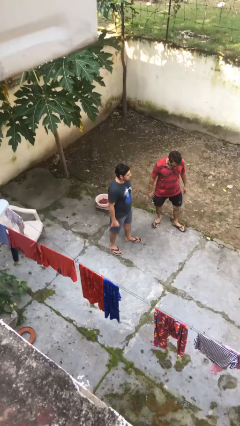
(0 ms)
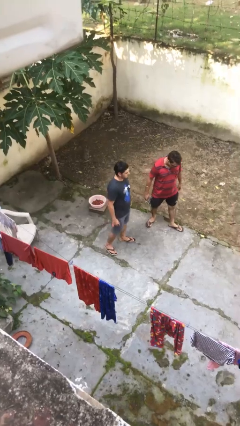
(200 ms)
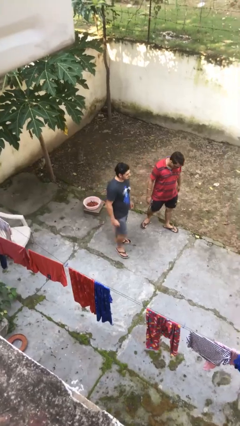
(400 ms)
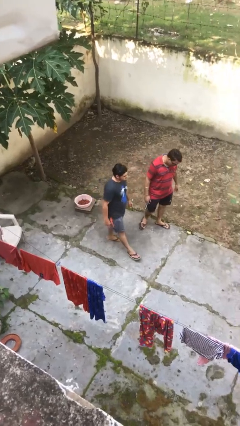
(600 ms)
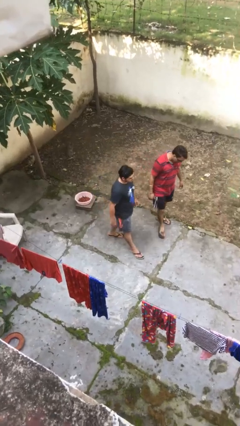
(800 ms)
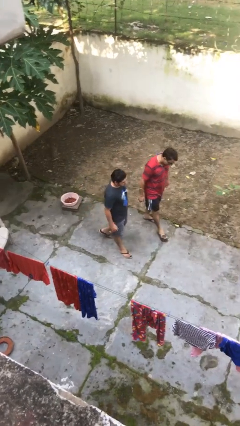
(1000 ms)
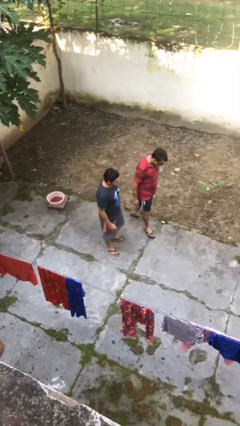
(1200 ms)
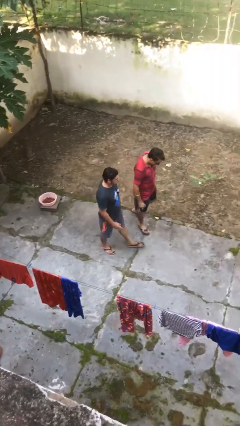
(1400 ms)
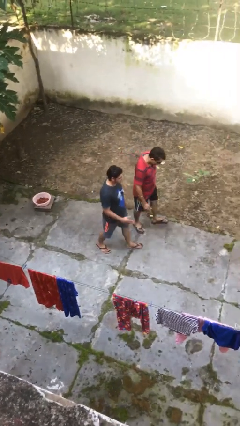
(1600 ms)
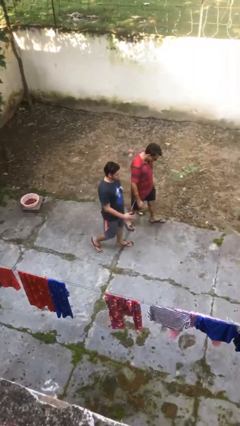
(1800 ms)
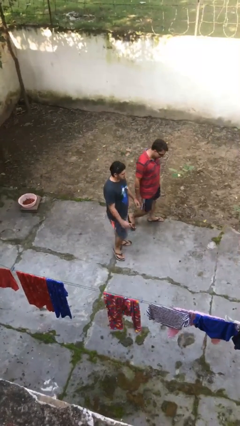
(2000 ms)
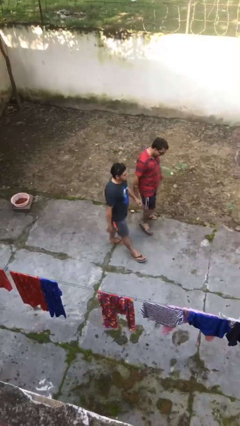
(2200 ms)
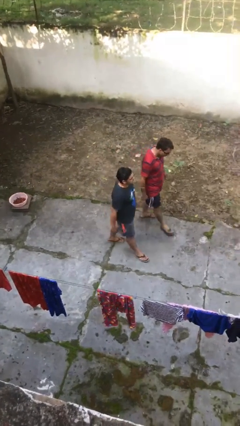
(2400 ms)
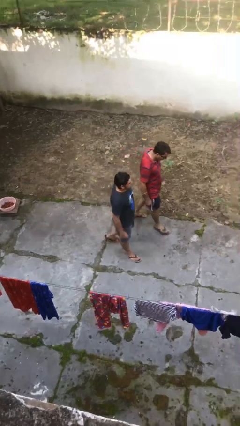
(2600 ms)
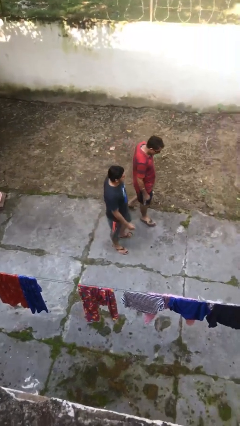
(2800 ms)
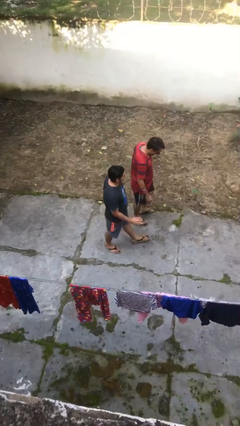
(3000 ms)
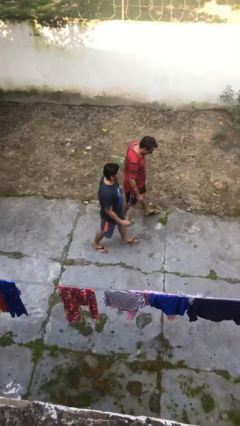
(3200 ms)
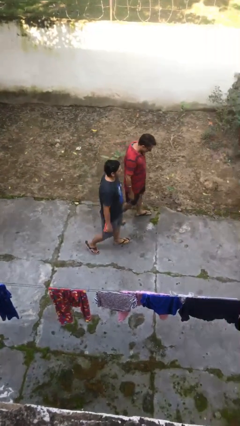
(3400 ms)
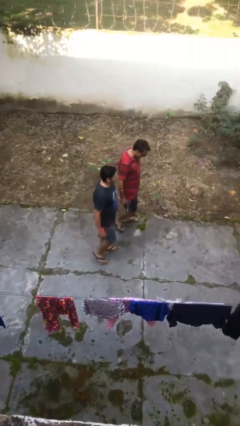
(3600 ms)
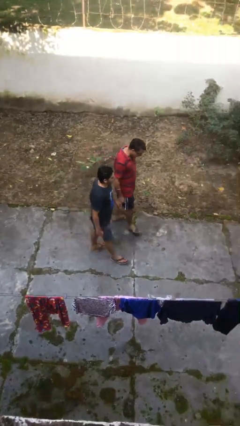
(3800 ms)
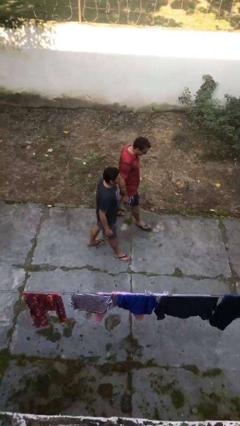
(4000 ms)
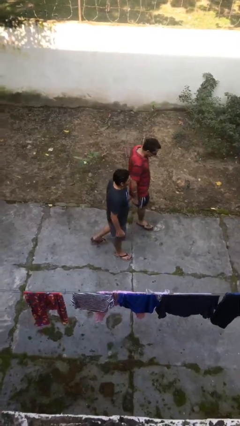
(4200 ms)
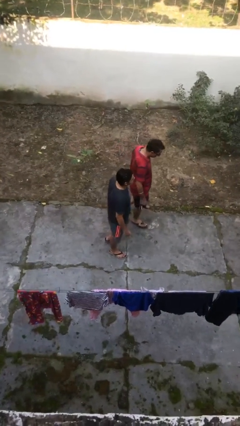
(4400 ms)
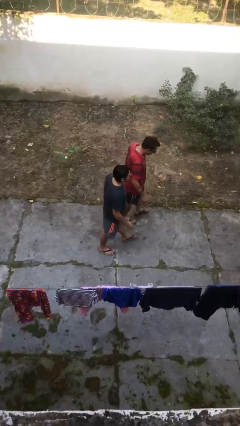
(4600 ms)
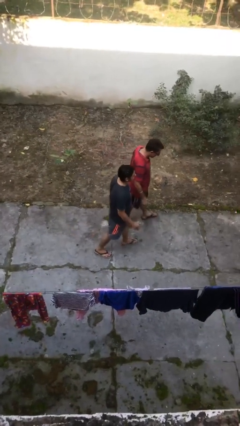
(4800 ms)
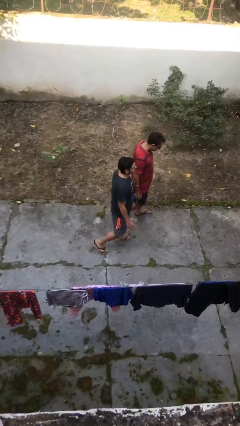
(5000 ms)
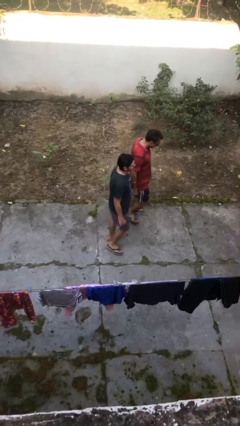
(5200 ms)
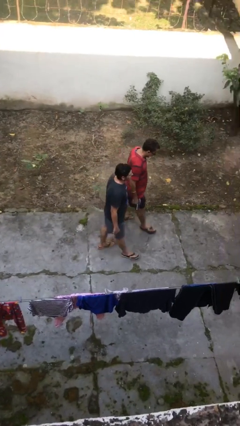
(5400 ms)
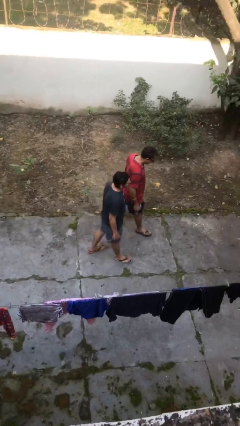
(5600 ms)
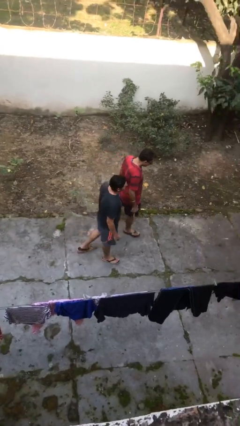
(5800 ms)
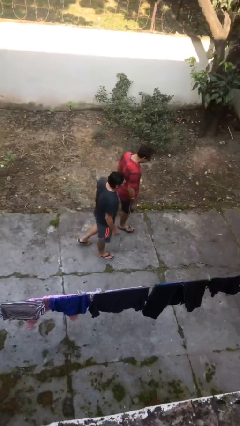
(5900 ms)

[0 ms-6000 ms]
person talks to person

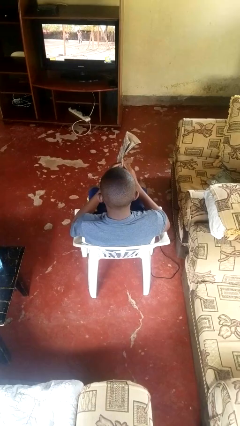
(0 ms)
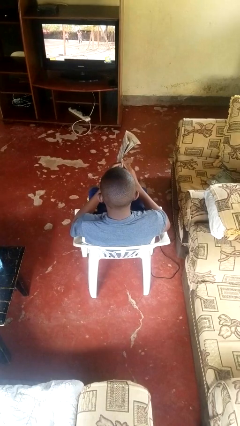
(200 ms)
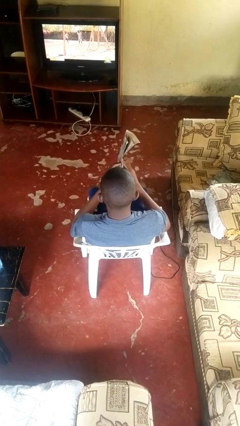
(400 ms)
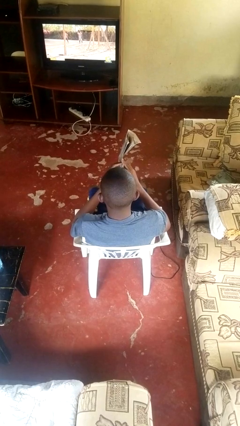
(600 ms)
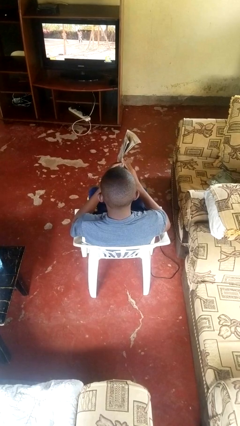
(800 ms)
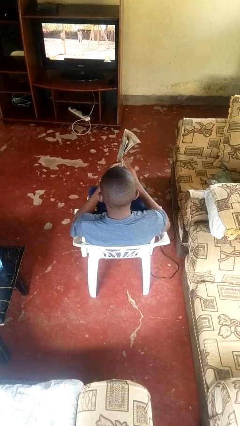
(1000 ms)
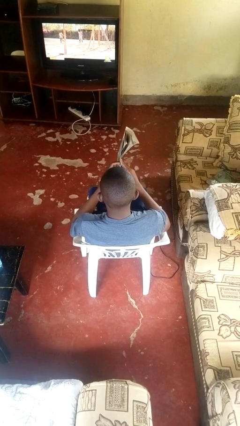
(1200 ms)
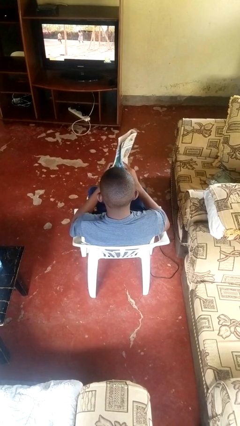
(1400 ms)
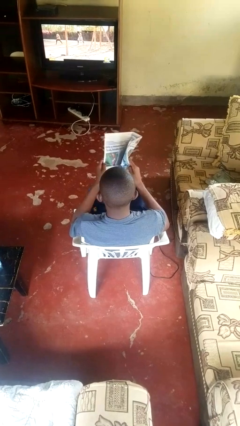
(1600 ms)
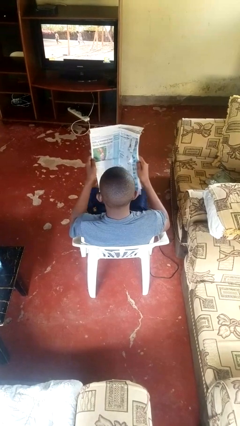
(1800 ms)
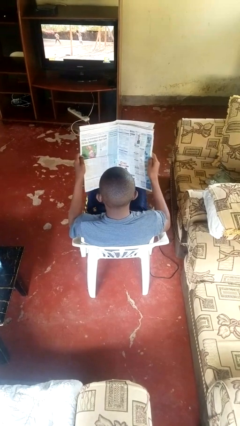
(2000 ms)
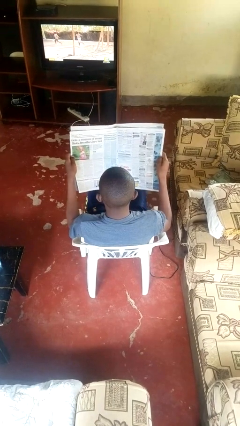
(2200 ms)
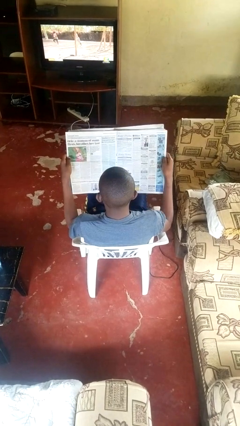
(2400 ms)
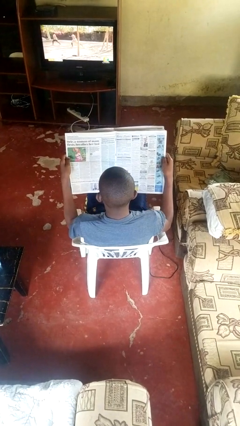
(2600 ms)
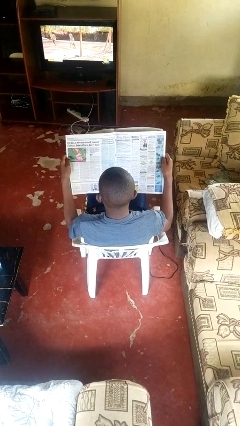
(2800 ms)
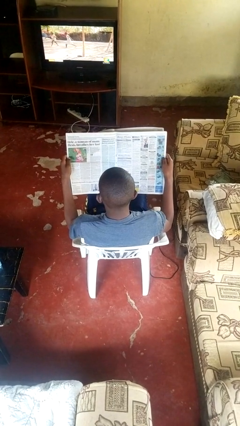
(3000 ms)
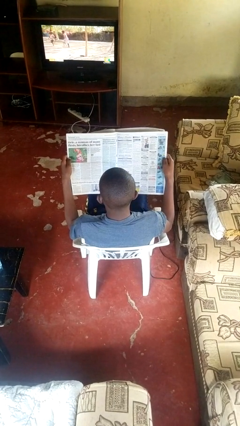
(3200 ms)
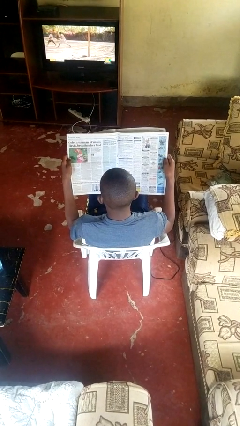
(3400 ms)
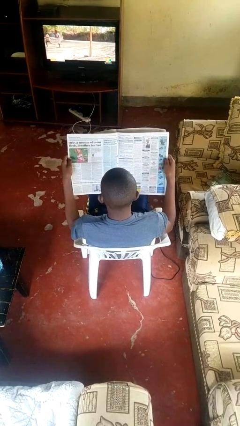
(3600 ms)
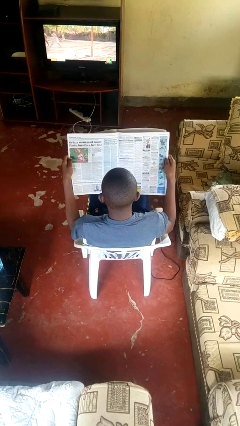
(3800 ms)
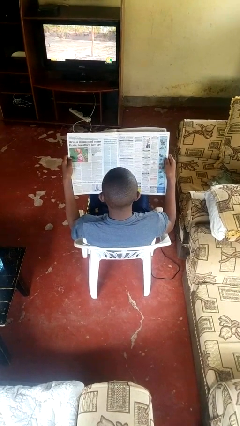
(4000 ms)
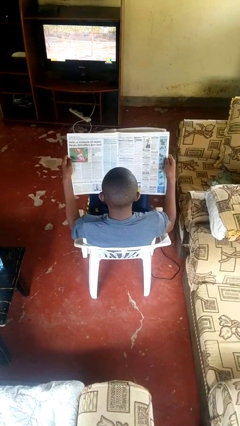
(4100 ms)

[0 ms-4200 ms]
person reads newspaper

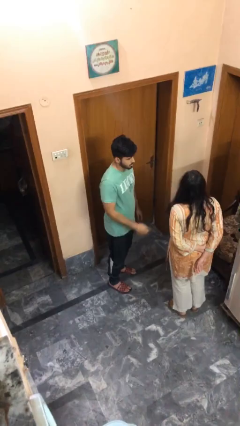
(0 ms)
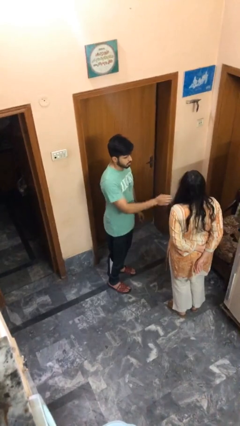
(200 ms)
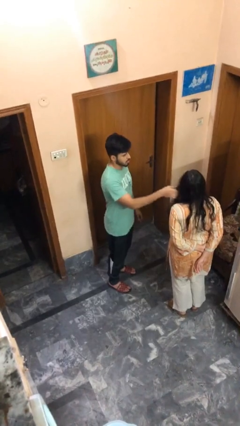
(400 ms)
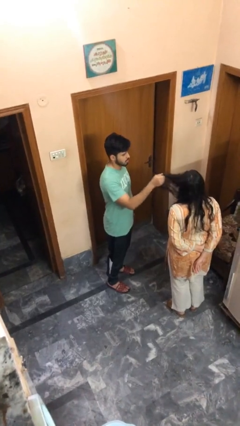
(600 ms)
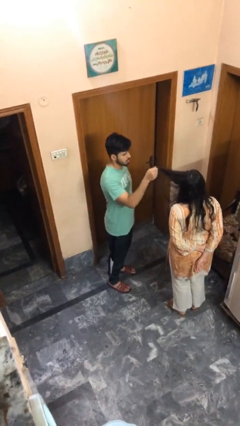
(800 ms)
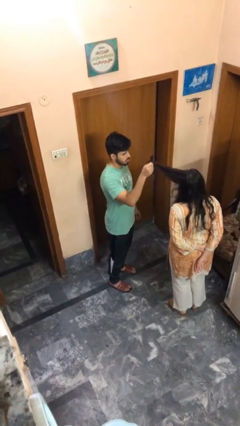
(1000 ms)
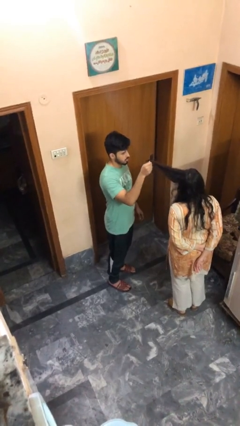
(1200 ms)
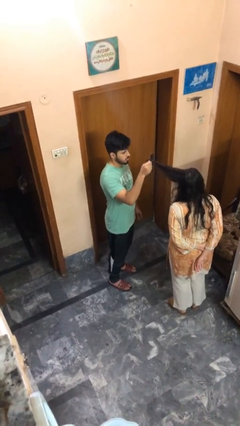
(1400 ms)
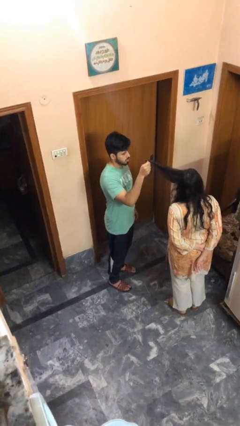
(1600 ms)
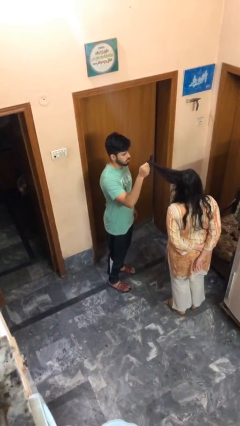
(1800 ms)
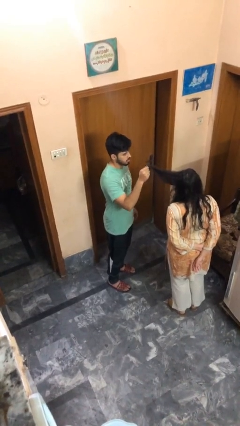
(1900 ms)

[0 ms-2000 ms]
person grabs person by hair

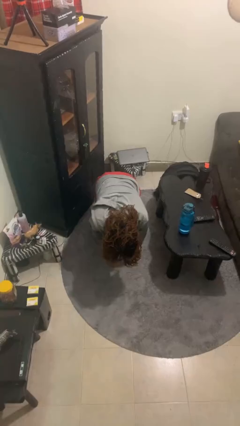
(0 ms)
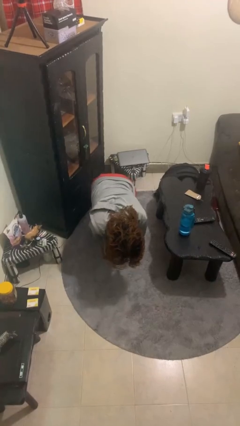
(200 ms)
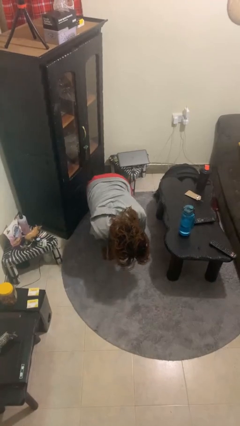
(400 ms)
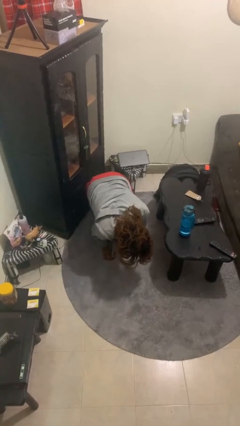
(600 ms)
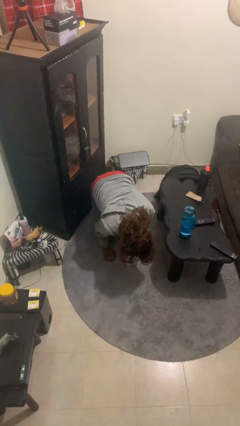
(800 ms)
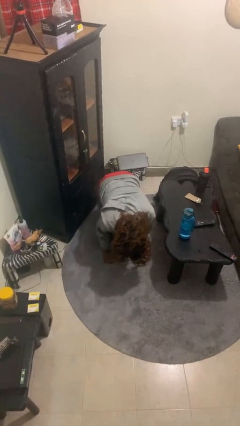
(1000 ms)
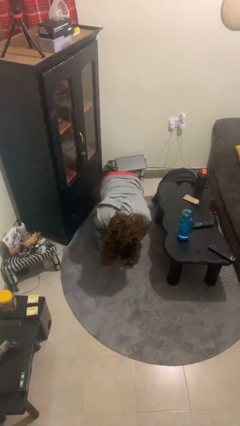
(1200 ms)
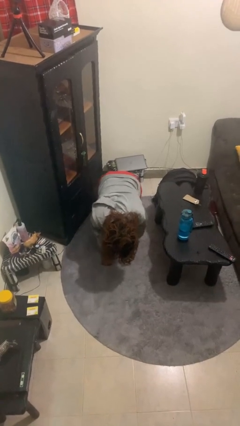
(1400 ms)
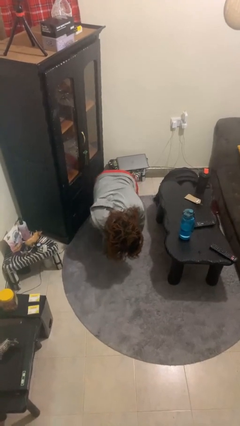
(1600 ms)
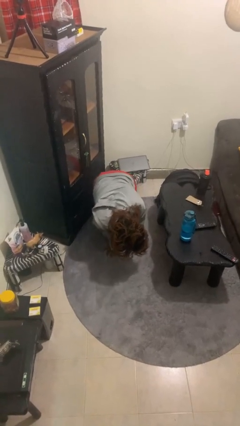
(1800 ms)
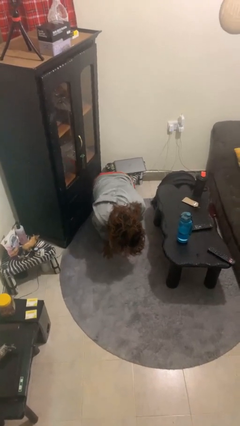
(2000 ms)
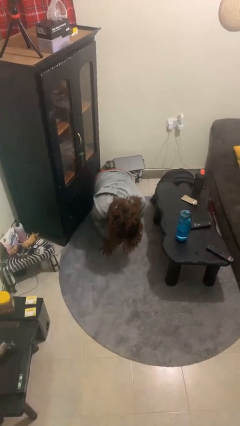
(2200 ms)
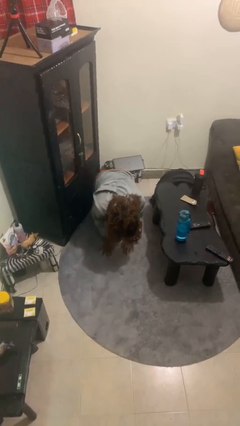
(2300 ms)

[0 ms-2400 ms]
person crawls

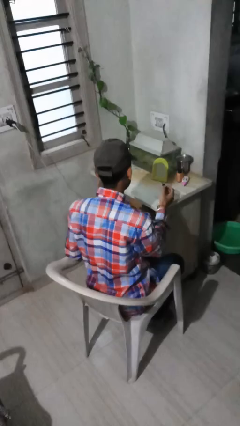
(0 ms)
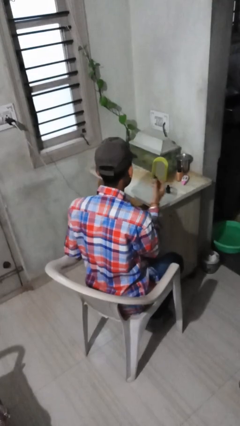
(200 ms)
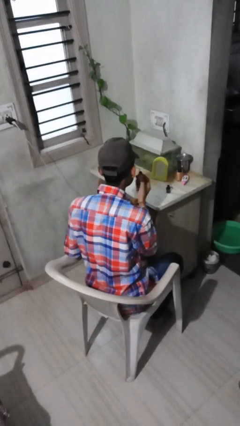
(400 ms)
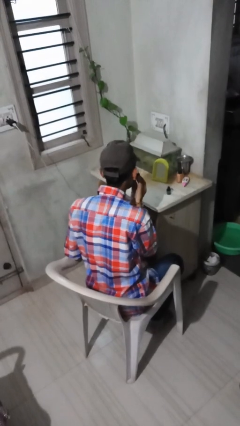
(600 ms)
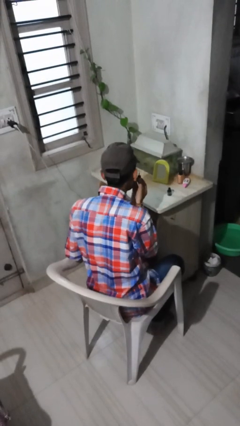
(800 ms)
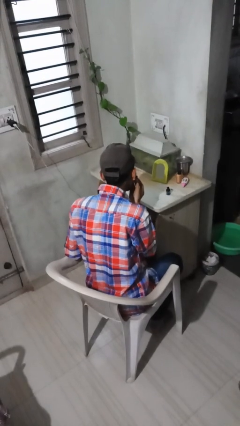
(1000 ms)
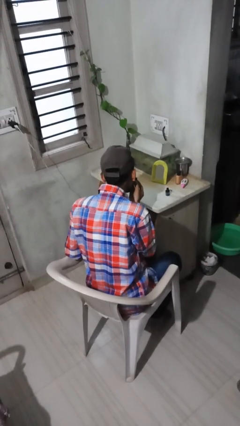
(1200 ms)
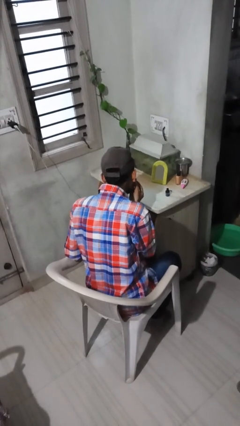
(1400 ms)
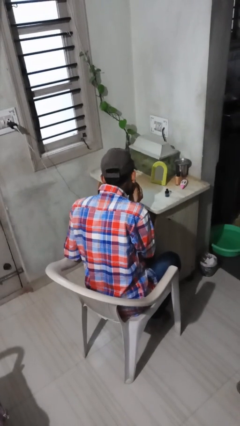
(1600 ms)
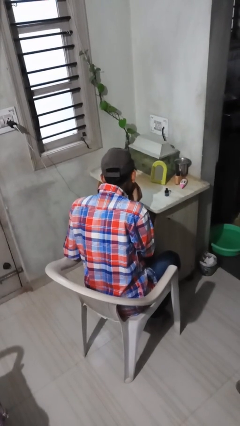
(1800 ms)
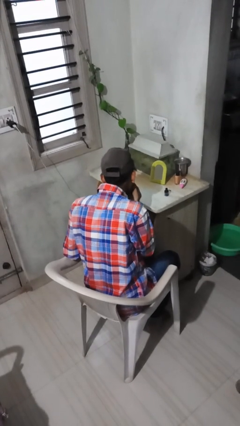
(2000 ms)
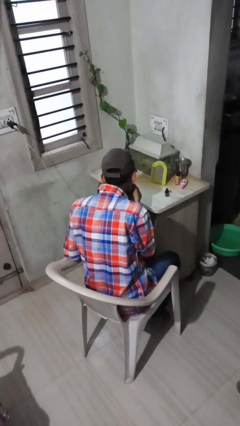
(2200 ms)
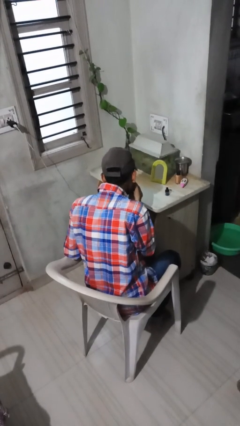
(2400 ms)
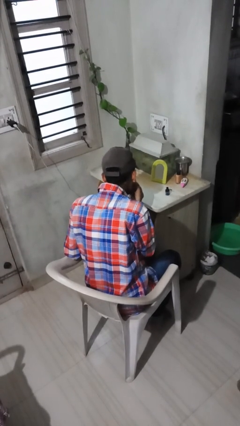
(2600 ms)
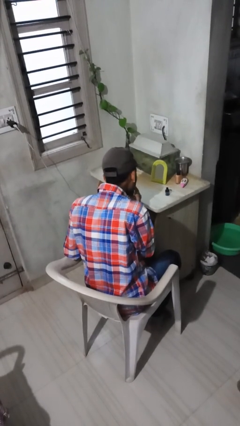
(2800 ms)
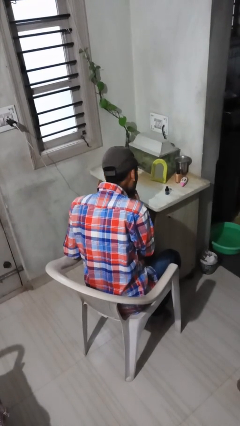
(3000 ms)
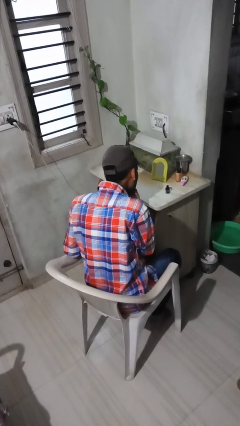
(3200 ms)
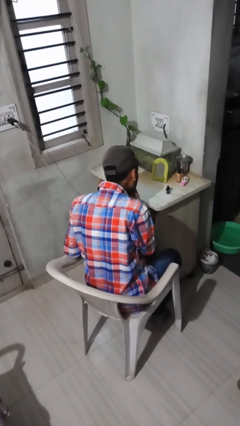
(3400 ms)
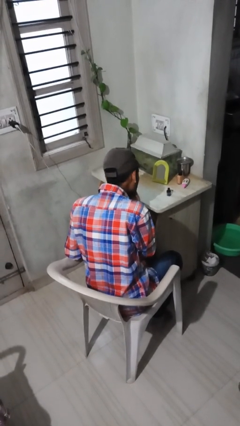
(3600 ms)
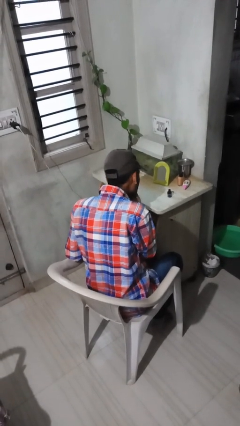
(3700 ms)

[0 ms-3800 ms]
person applies eye makeup
